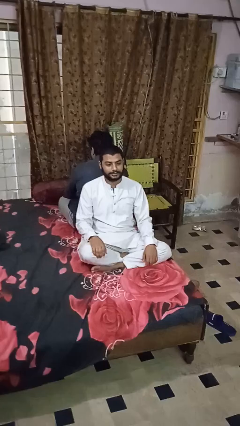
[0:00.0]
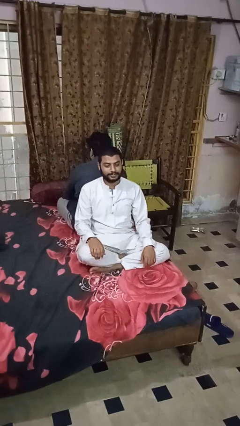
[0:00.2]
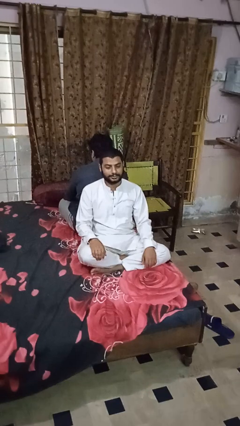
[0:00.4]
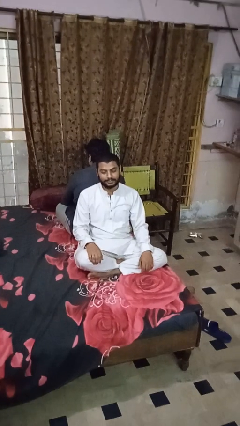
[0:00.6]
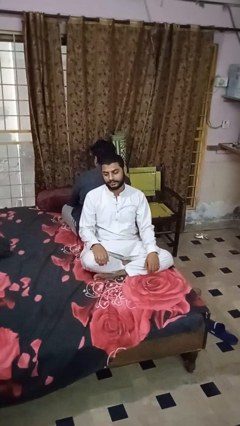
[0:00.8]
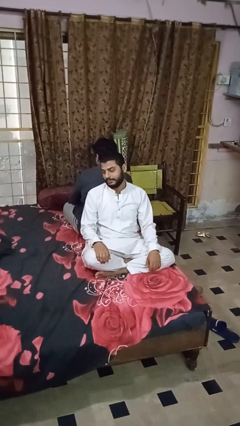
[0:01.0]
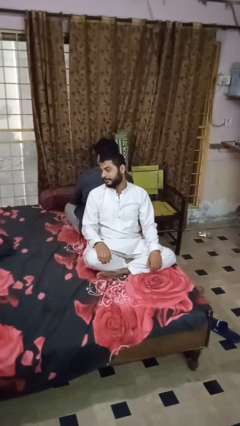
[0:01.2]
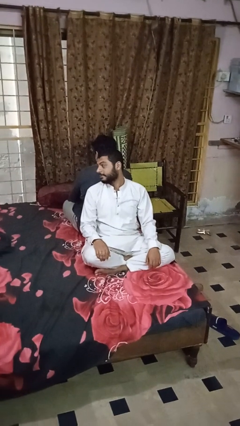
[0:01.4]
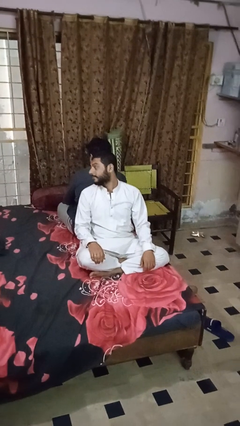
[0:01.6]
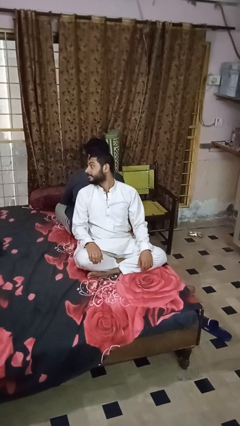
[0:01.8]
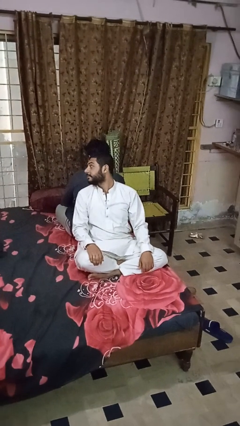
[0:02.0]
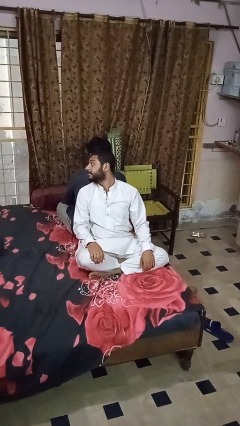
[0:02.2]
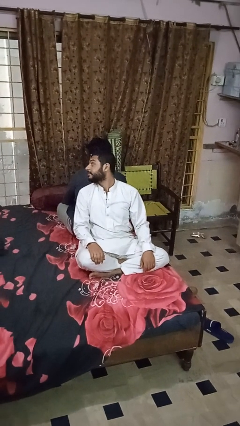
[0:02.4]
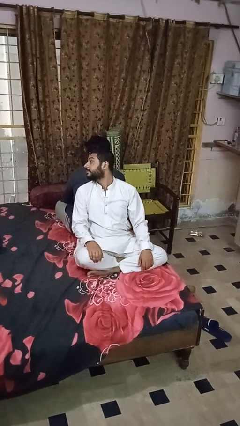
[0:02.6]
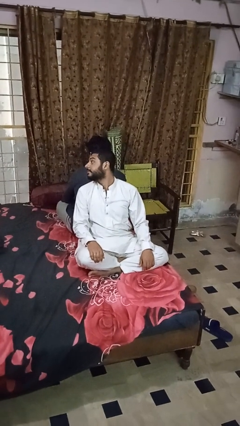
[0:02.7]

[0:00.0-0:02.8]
person looks over shoulder

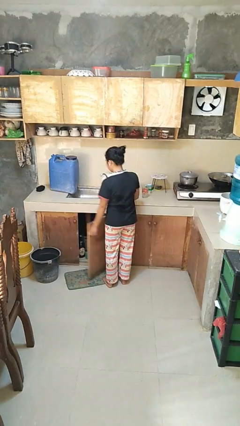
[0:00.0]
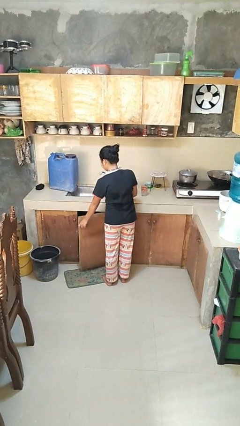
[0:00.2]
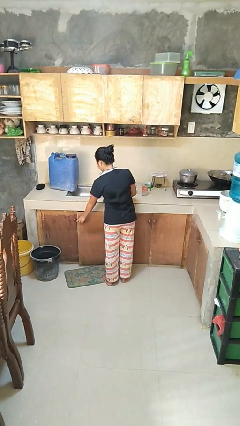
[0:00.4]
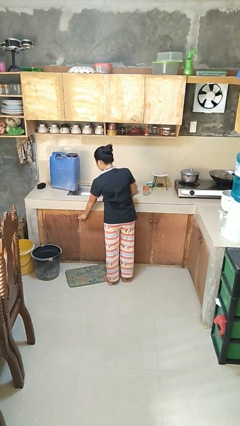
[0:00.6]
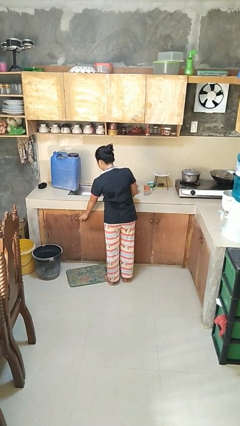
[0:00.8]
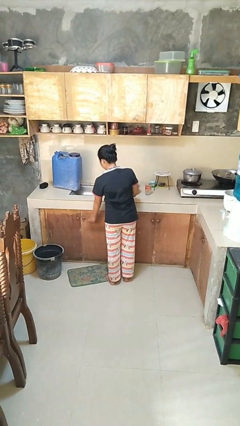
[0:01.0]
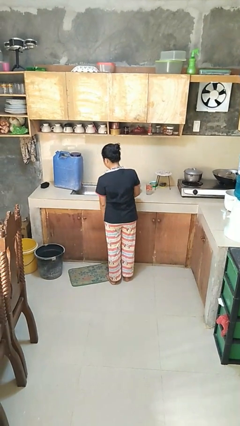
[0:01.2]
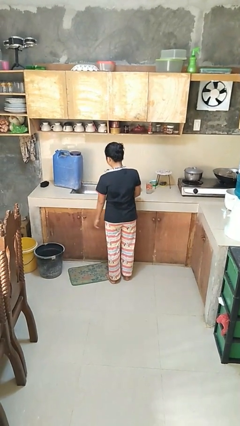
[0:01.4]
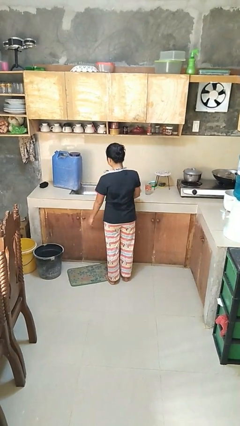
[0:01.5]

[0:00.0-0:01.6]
person closes cabinet

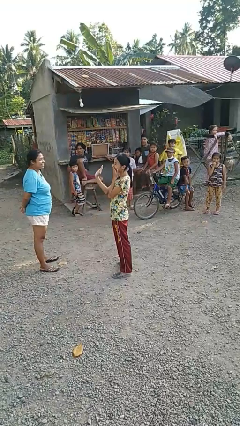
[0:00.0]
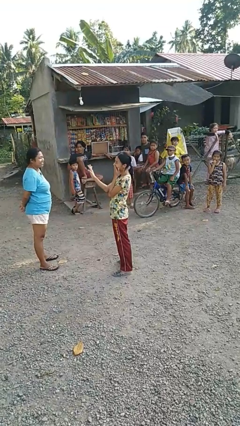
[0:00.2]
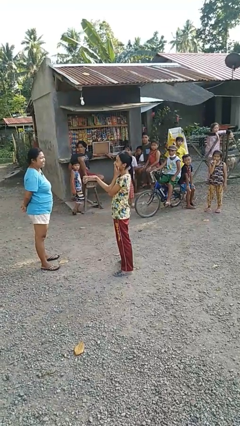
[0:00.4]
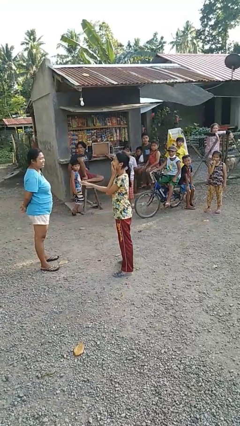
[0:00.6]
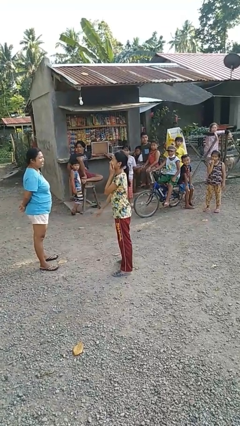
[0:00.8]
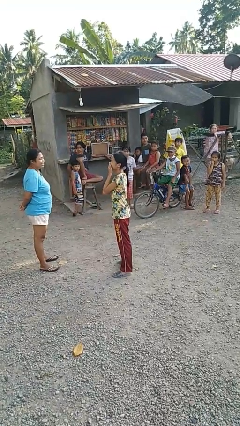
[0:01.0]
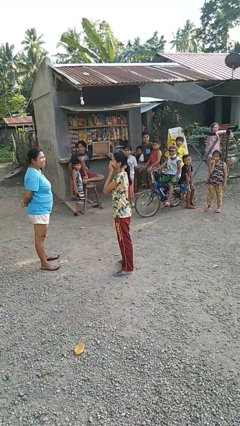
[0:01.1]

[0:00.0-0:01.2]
person laughs with person

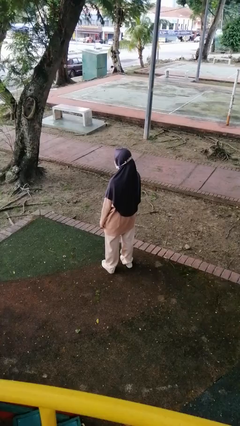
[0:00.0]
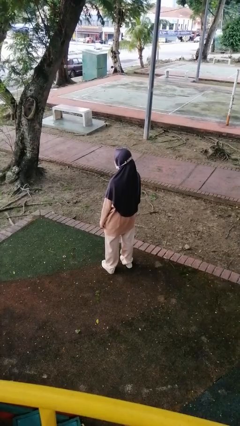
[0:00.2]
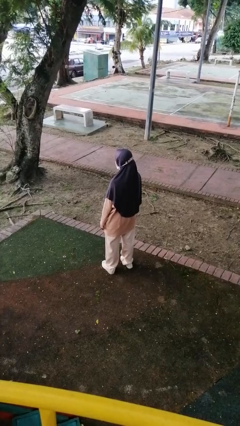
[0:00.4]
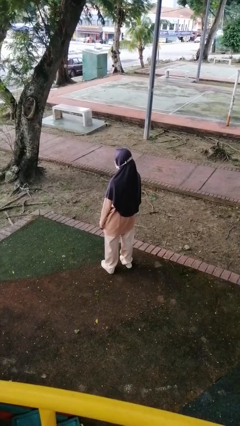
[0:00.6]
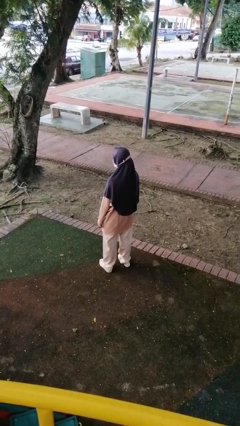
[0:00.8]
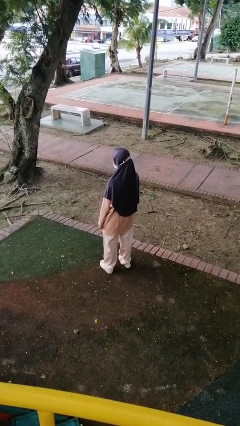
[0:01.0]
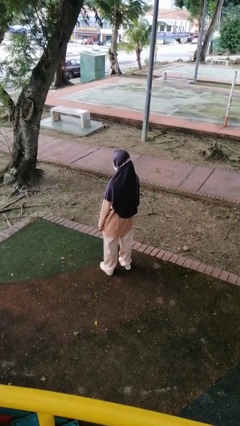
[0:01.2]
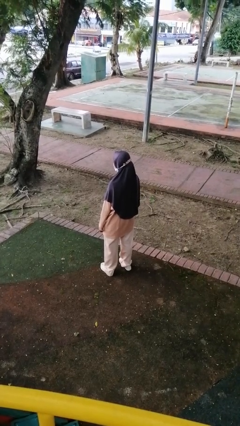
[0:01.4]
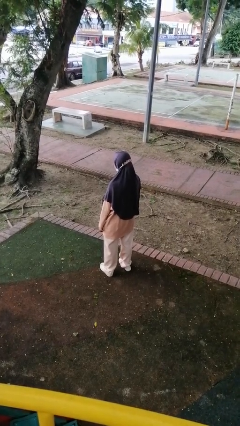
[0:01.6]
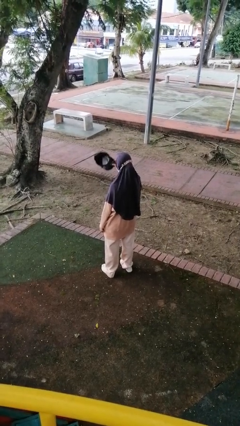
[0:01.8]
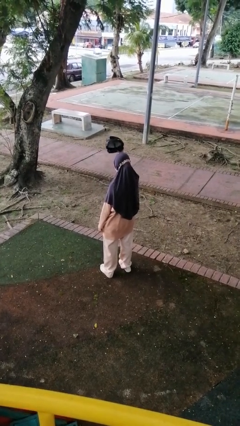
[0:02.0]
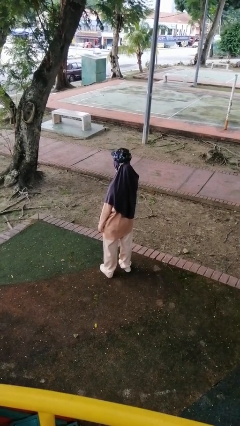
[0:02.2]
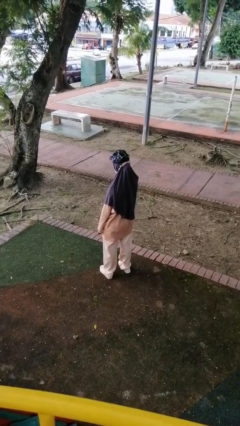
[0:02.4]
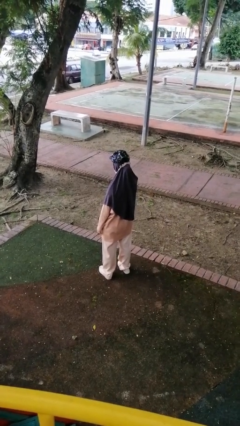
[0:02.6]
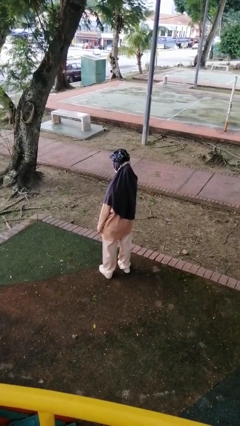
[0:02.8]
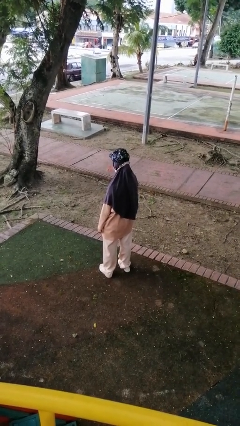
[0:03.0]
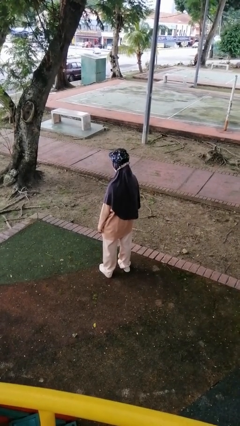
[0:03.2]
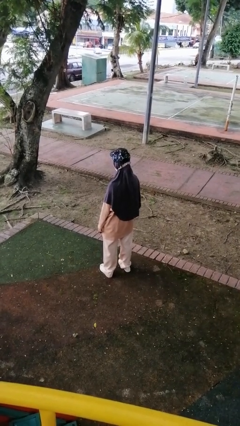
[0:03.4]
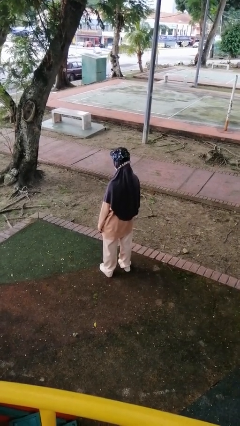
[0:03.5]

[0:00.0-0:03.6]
person puts on hat

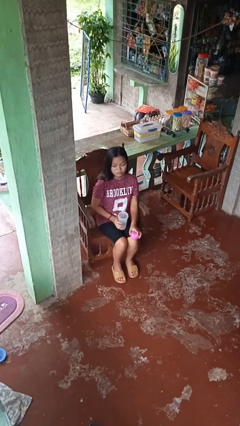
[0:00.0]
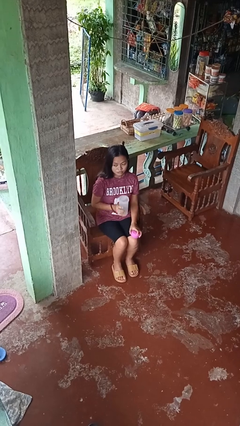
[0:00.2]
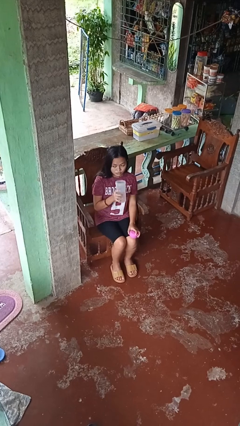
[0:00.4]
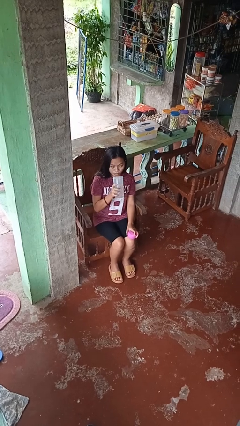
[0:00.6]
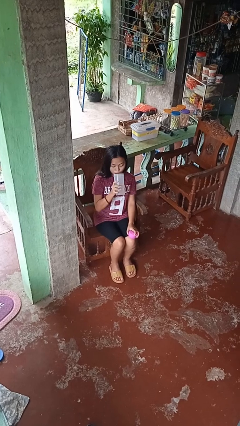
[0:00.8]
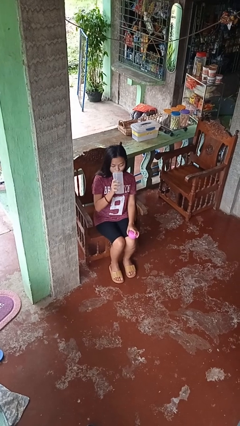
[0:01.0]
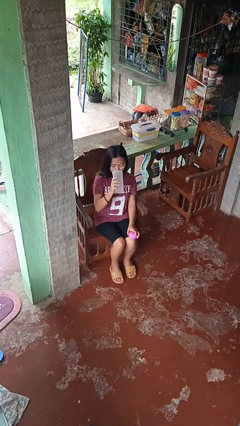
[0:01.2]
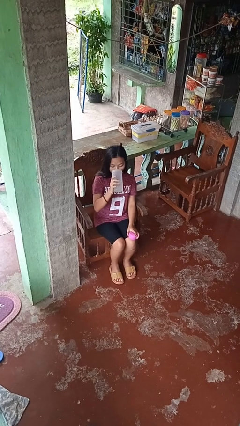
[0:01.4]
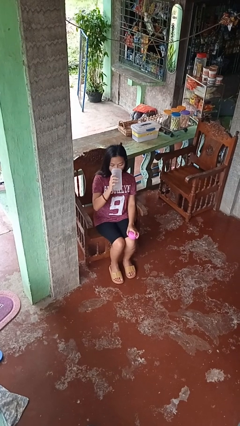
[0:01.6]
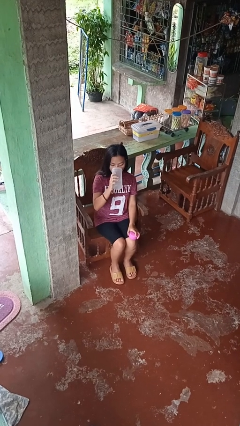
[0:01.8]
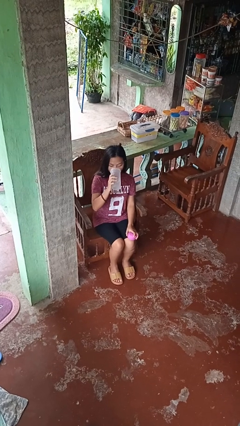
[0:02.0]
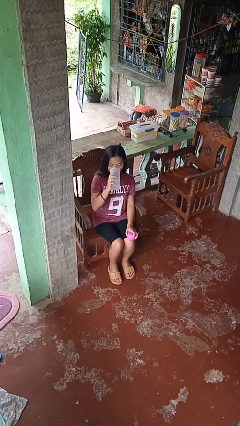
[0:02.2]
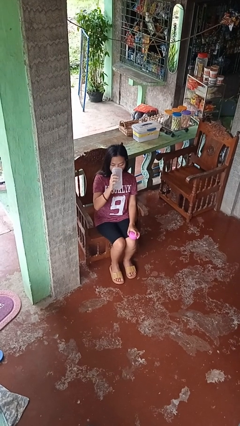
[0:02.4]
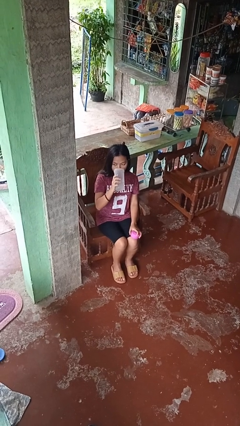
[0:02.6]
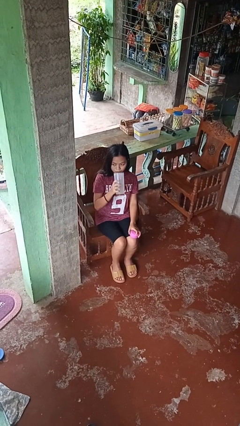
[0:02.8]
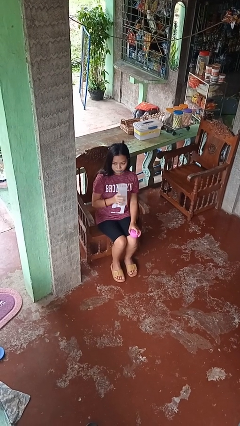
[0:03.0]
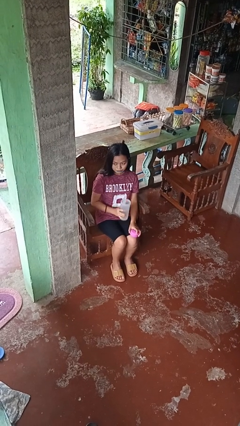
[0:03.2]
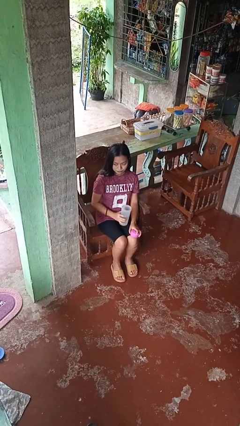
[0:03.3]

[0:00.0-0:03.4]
person drinks from bottle

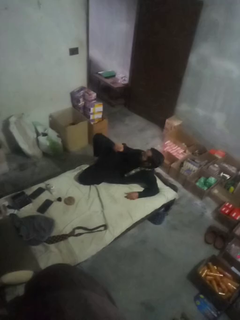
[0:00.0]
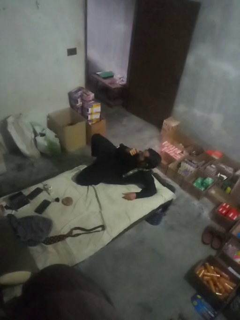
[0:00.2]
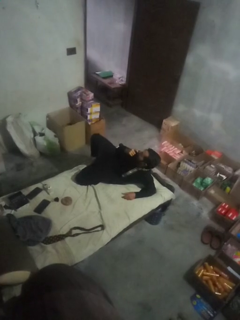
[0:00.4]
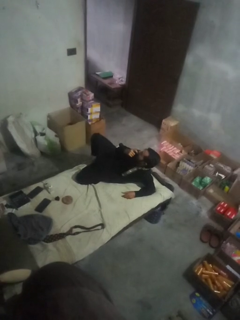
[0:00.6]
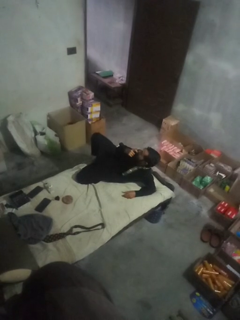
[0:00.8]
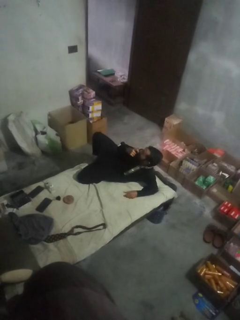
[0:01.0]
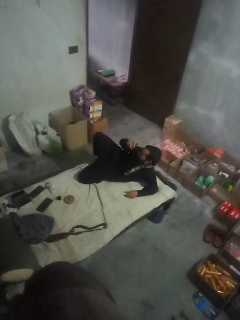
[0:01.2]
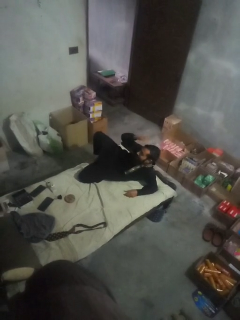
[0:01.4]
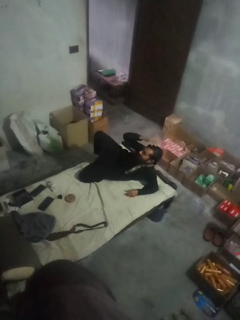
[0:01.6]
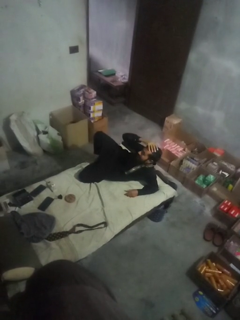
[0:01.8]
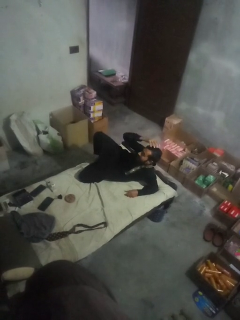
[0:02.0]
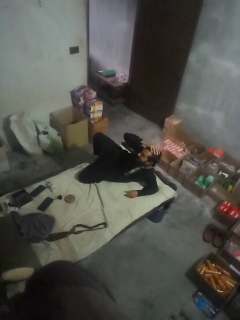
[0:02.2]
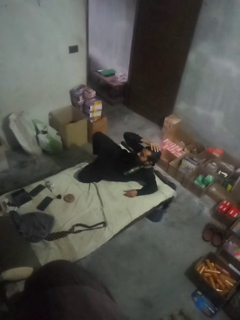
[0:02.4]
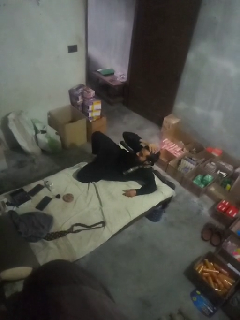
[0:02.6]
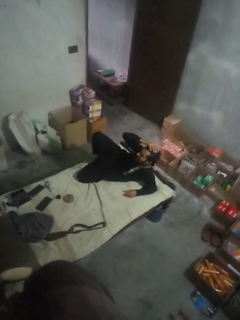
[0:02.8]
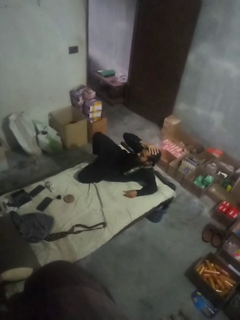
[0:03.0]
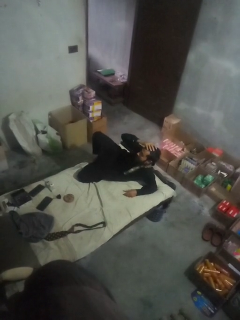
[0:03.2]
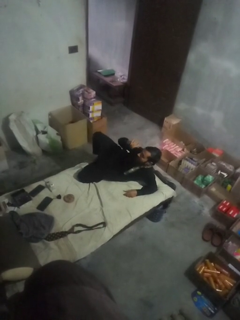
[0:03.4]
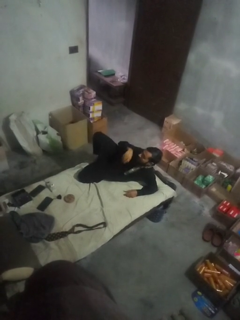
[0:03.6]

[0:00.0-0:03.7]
person pats head

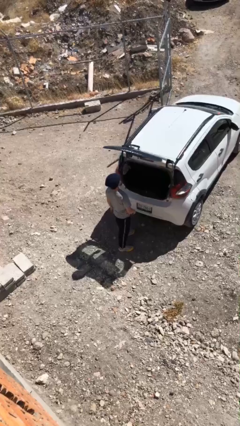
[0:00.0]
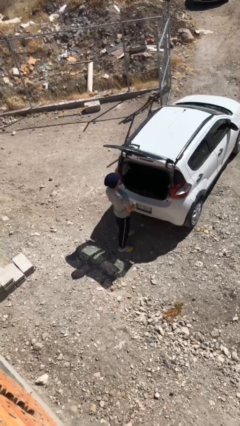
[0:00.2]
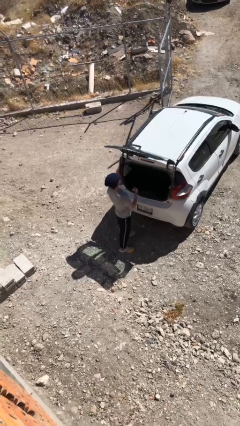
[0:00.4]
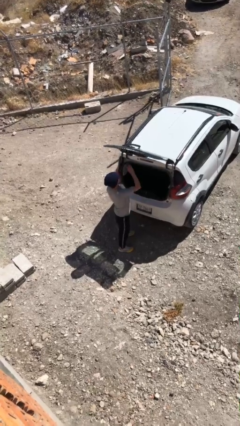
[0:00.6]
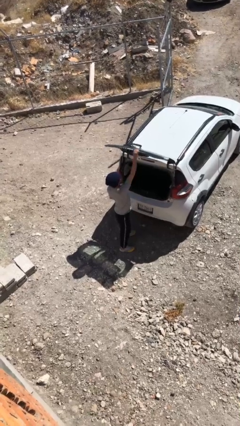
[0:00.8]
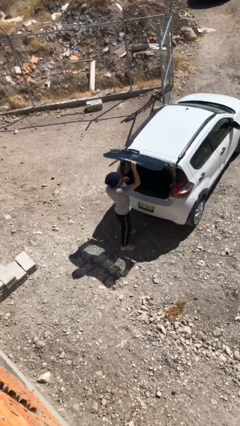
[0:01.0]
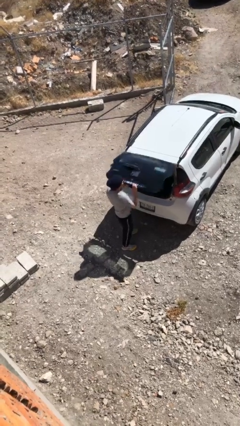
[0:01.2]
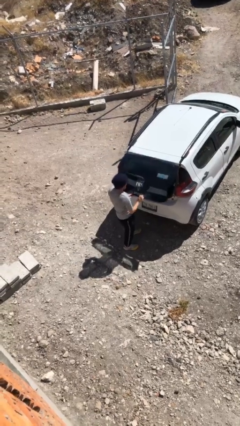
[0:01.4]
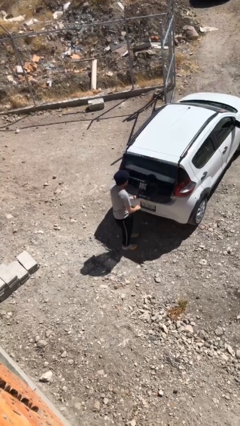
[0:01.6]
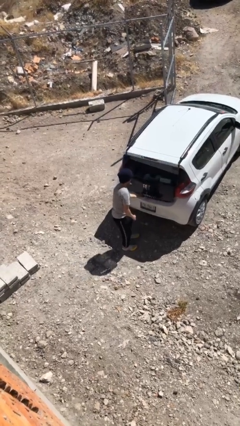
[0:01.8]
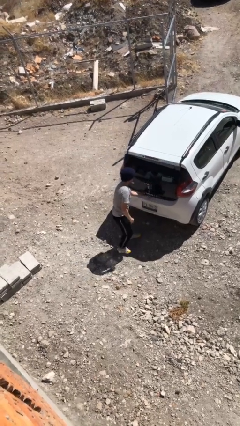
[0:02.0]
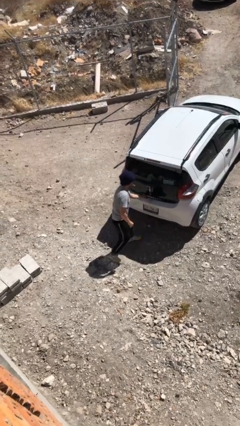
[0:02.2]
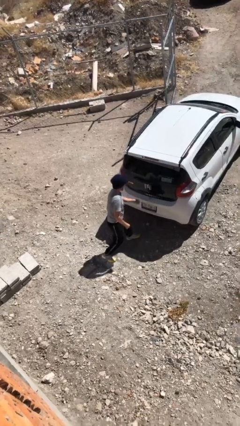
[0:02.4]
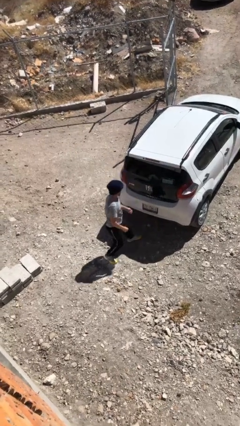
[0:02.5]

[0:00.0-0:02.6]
person closes car trunk
